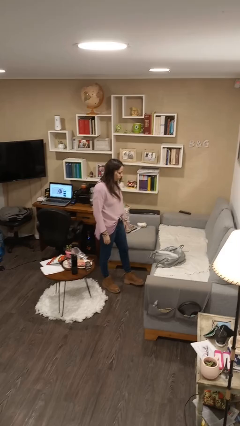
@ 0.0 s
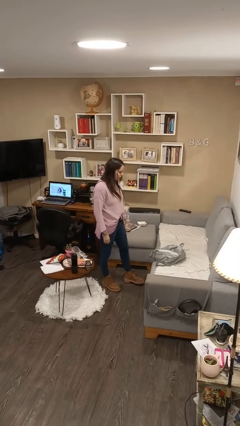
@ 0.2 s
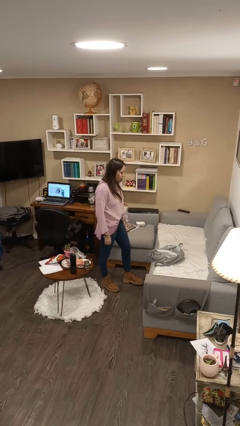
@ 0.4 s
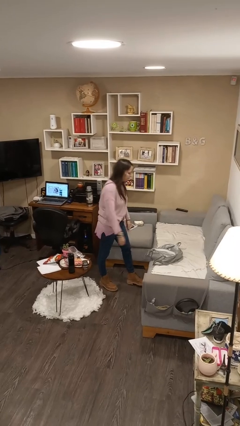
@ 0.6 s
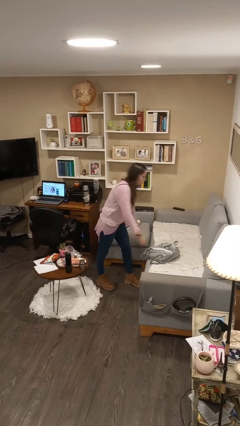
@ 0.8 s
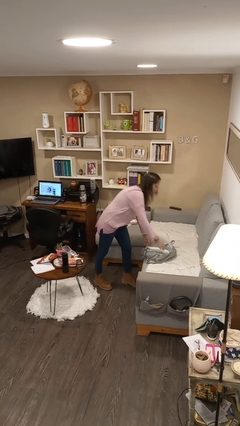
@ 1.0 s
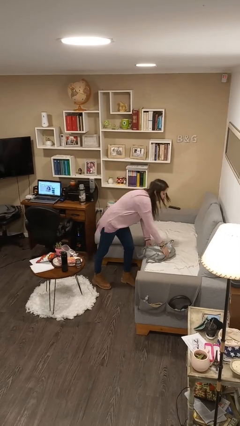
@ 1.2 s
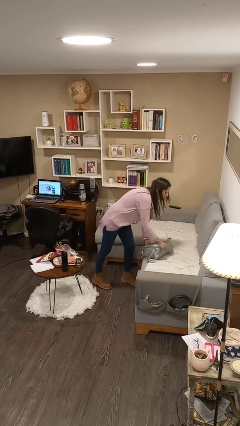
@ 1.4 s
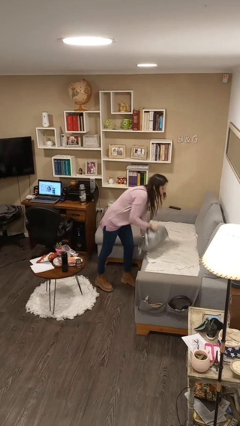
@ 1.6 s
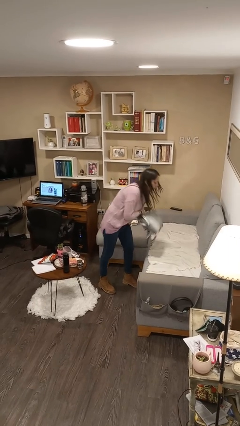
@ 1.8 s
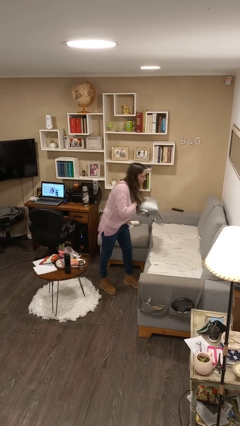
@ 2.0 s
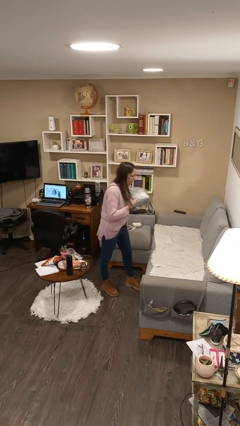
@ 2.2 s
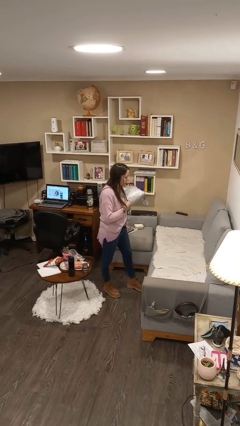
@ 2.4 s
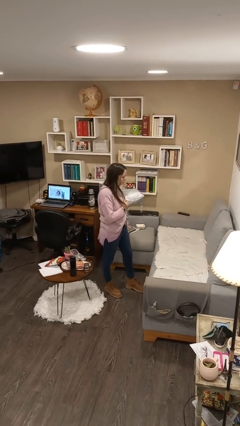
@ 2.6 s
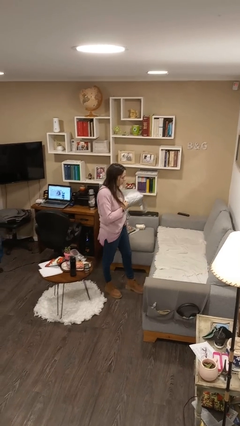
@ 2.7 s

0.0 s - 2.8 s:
person picks up object from couch

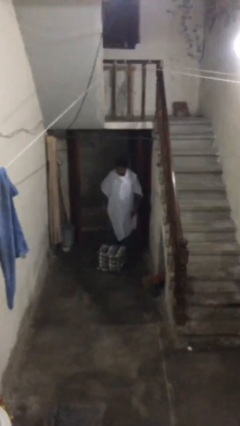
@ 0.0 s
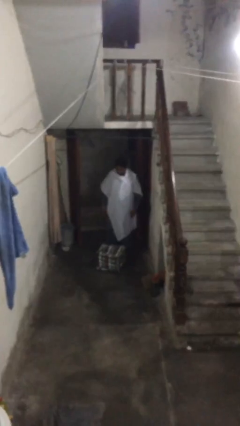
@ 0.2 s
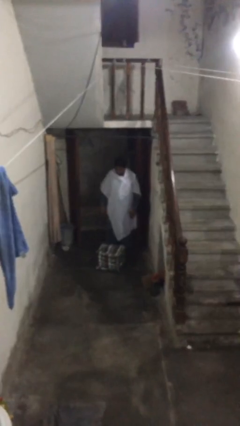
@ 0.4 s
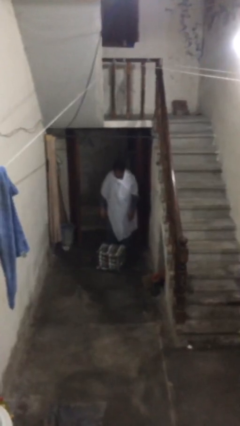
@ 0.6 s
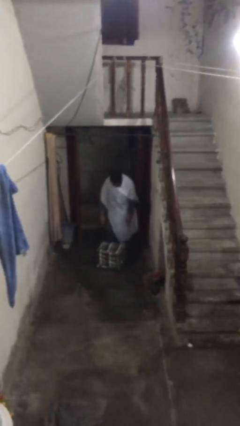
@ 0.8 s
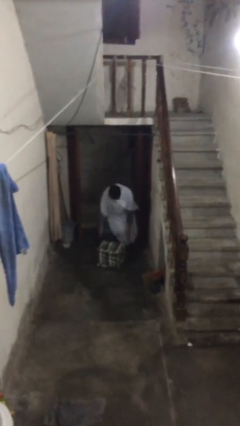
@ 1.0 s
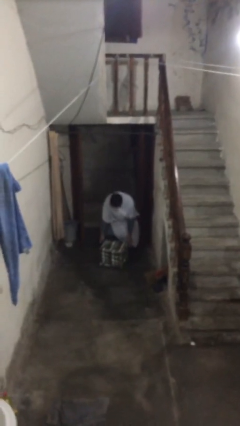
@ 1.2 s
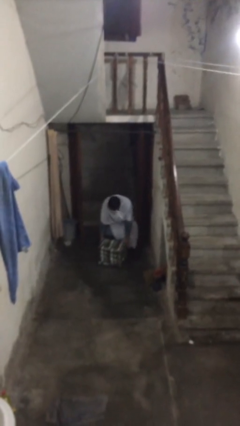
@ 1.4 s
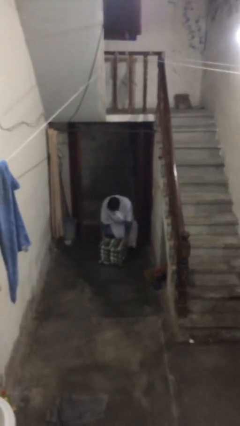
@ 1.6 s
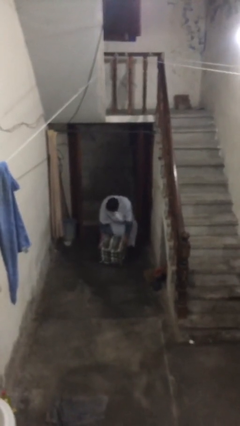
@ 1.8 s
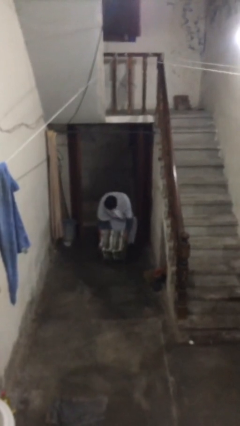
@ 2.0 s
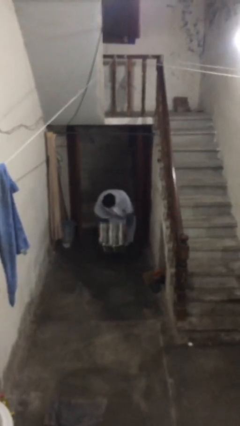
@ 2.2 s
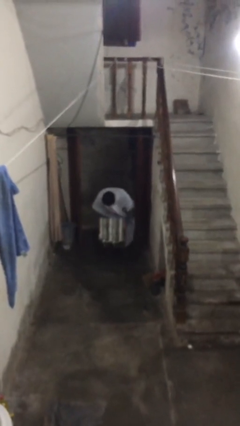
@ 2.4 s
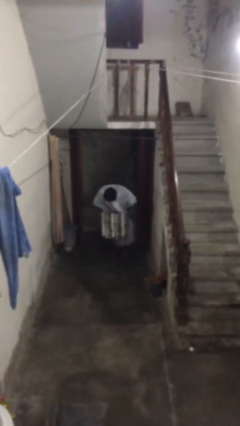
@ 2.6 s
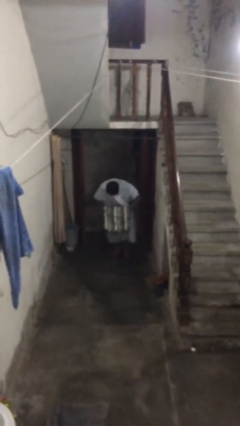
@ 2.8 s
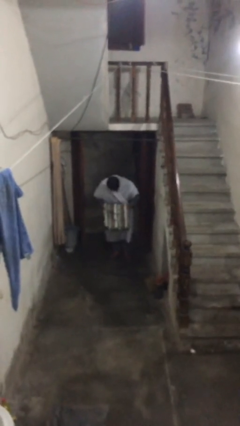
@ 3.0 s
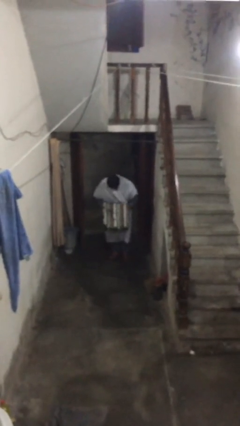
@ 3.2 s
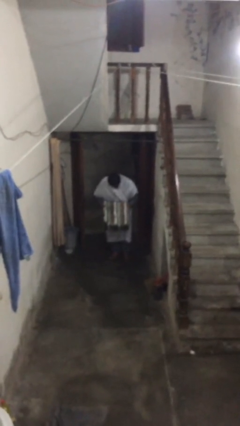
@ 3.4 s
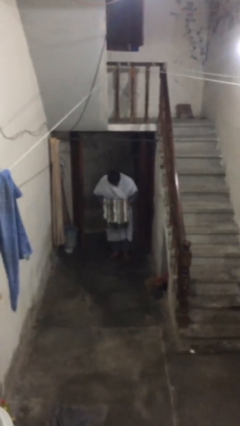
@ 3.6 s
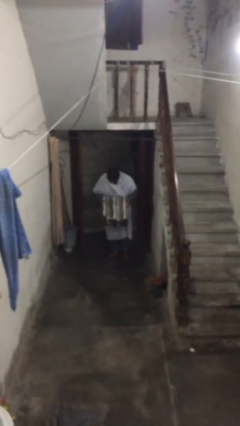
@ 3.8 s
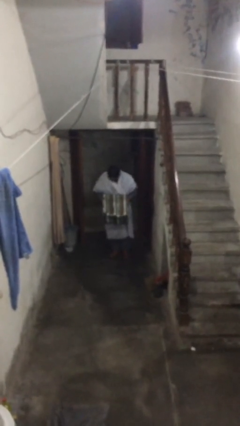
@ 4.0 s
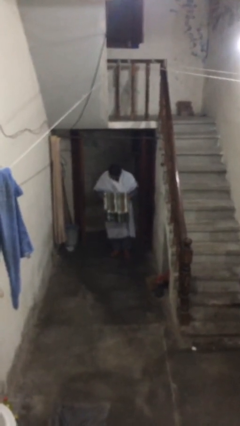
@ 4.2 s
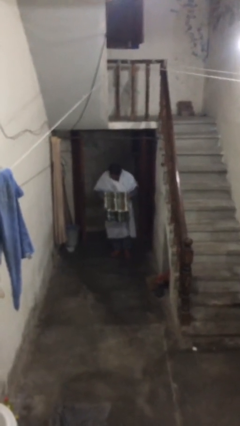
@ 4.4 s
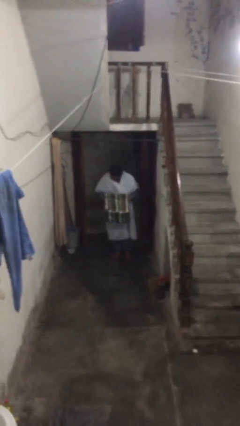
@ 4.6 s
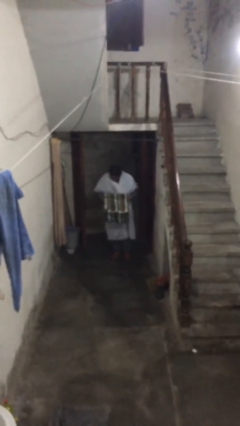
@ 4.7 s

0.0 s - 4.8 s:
person picks up object from floor

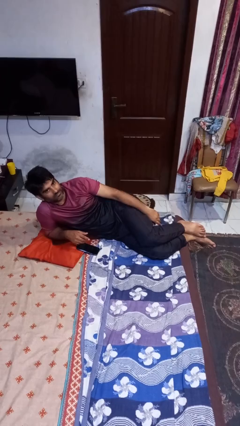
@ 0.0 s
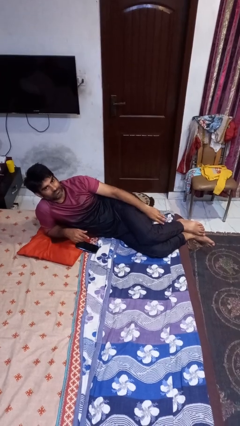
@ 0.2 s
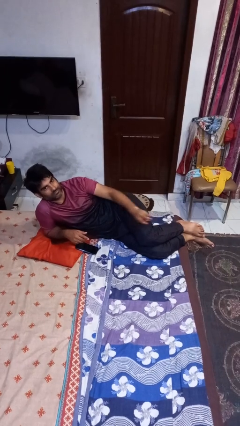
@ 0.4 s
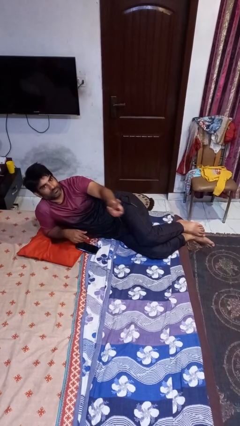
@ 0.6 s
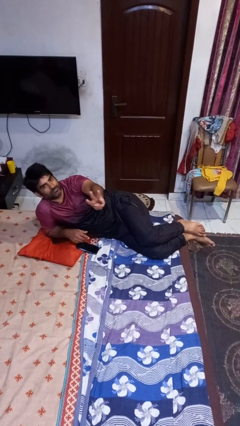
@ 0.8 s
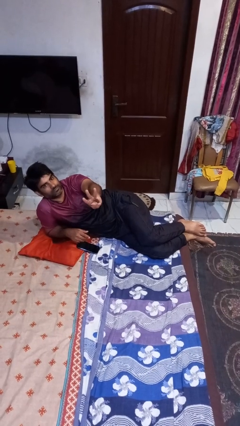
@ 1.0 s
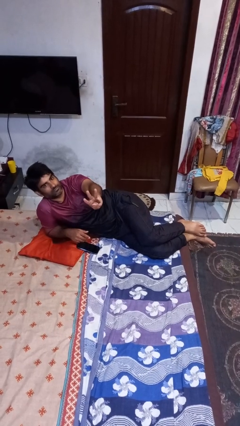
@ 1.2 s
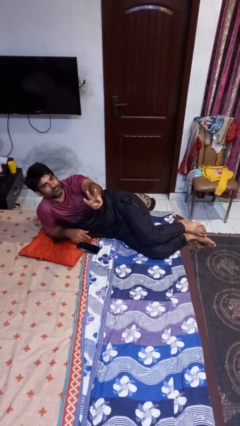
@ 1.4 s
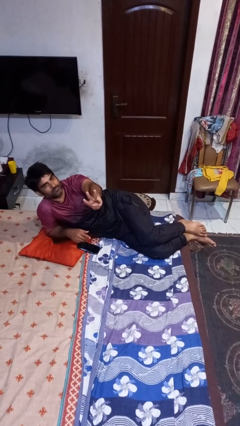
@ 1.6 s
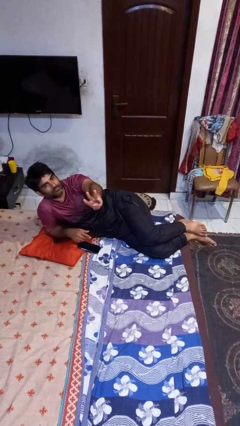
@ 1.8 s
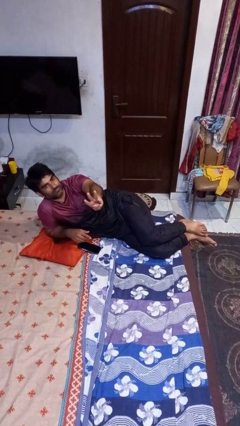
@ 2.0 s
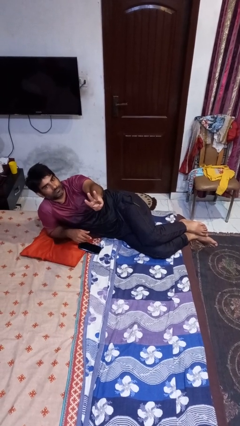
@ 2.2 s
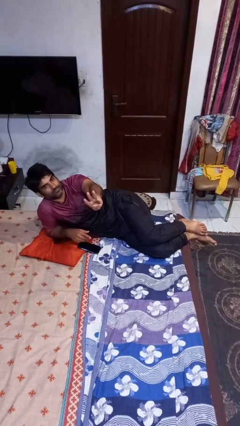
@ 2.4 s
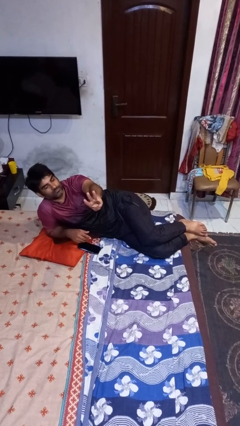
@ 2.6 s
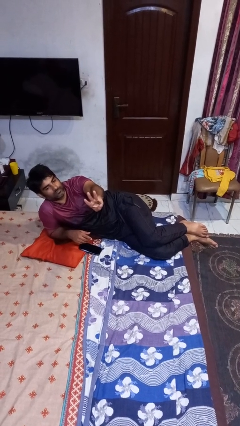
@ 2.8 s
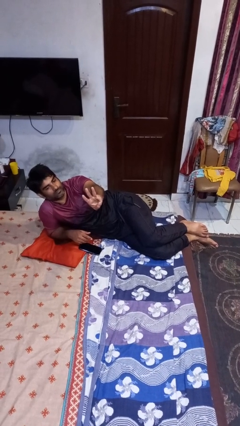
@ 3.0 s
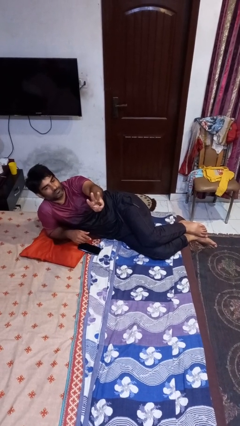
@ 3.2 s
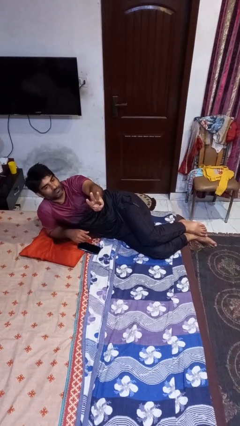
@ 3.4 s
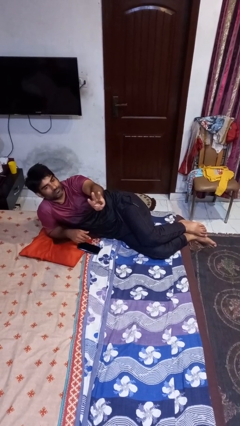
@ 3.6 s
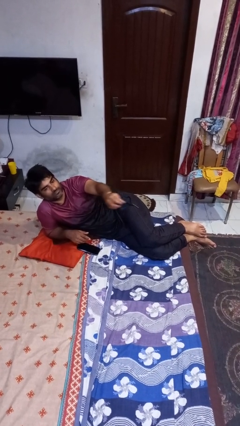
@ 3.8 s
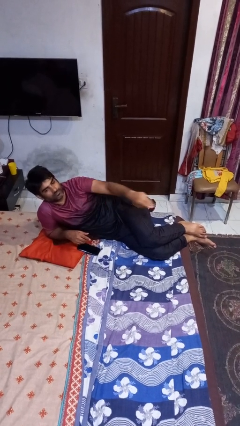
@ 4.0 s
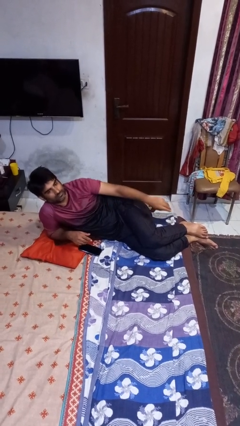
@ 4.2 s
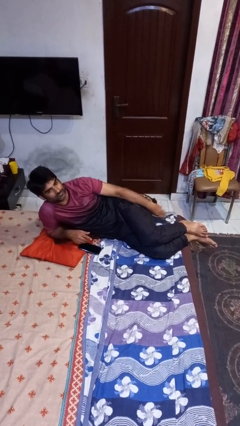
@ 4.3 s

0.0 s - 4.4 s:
person gestures number three

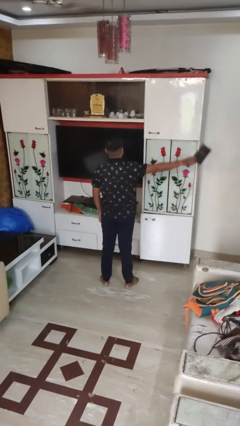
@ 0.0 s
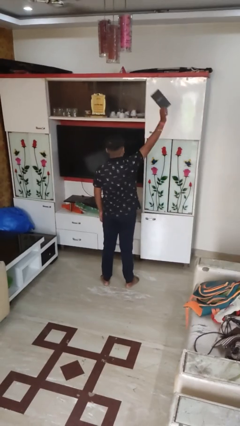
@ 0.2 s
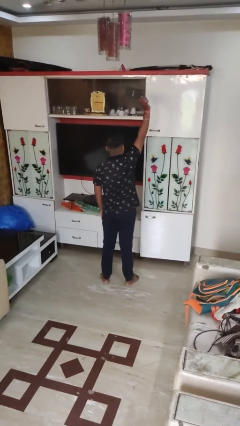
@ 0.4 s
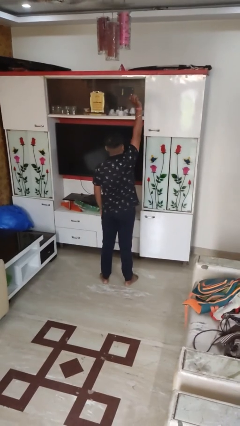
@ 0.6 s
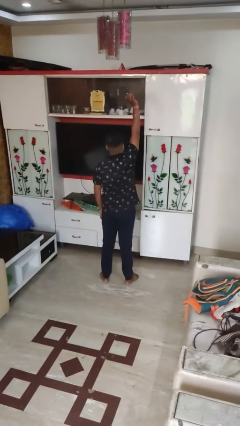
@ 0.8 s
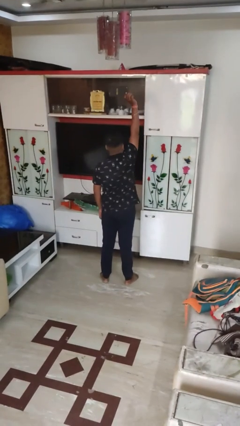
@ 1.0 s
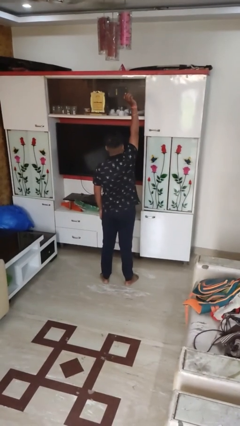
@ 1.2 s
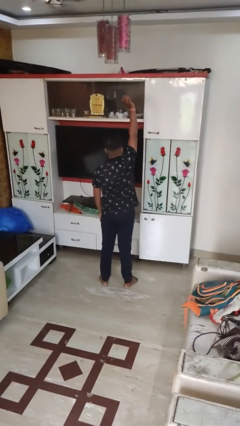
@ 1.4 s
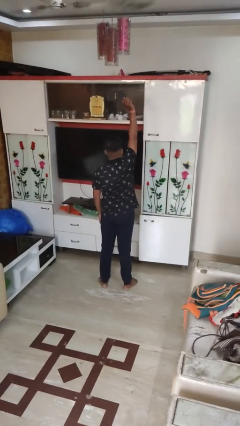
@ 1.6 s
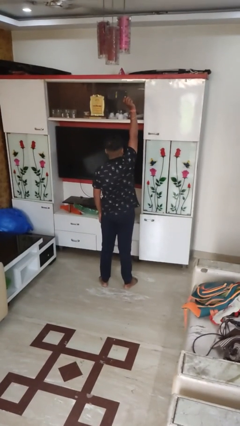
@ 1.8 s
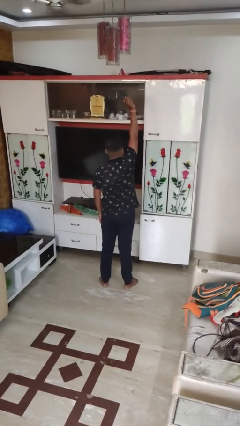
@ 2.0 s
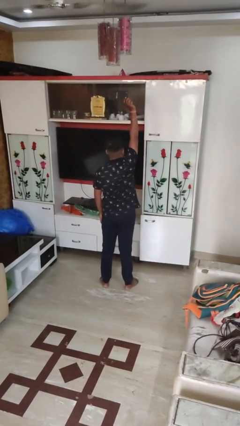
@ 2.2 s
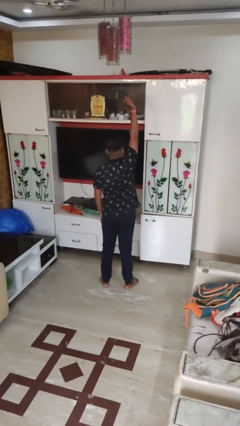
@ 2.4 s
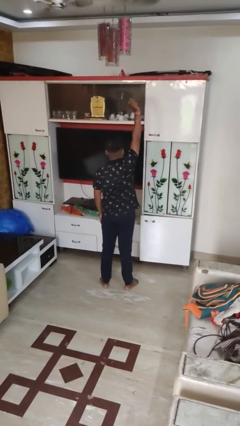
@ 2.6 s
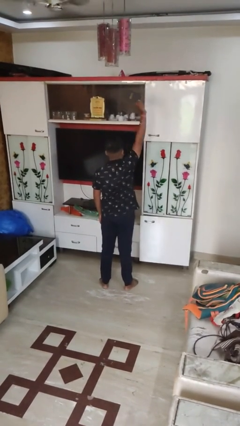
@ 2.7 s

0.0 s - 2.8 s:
person holds object above head

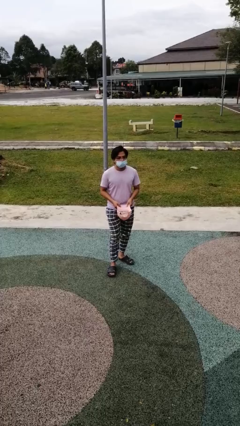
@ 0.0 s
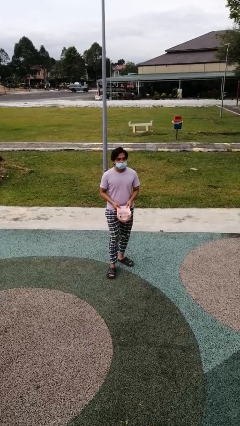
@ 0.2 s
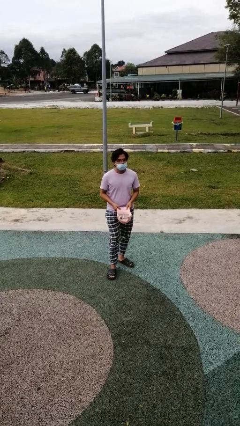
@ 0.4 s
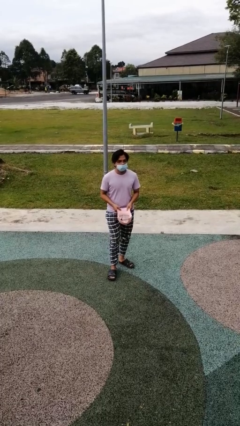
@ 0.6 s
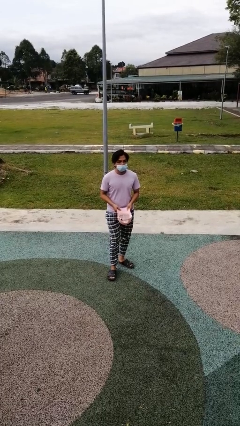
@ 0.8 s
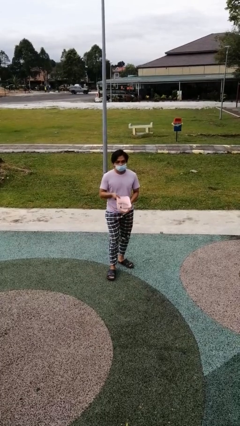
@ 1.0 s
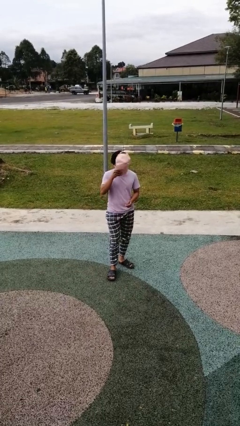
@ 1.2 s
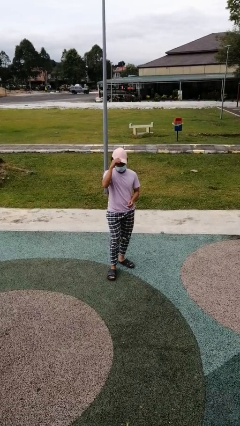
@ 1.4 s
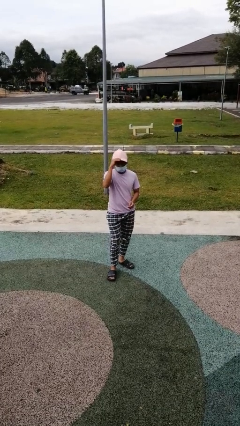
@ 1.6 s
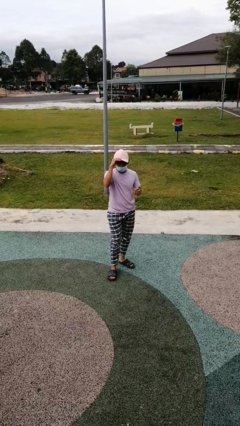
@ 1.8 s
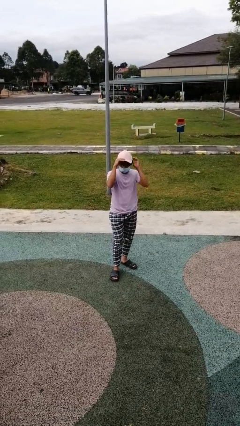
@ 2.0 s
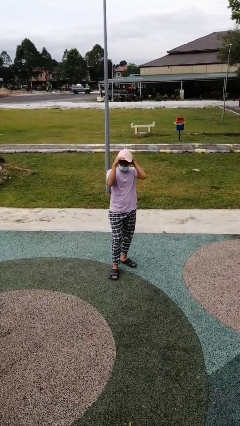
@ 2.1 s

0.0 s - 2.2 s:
person puts on hat
